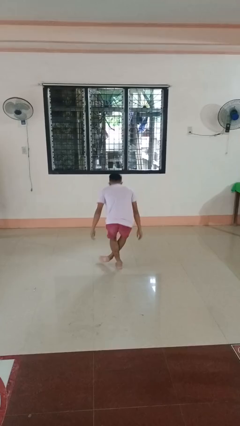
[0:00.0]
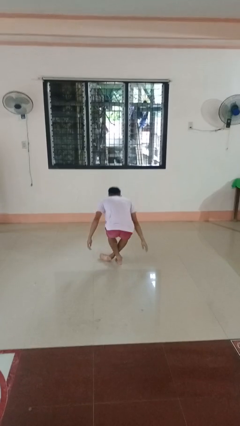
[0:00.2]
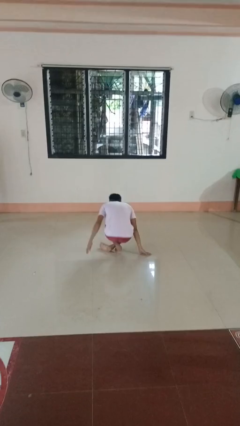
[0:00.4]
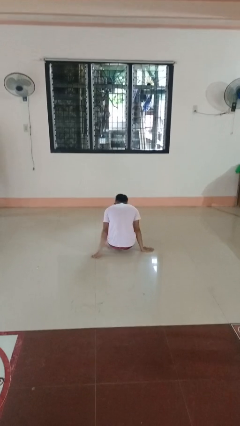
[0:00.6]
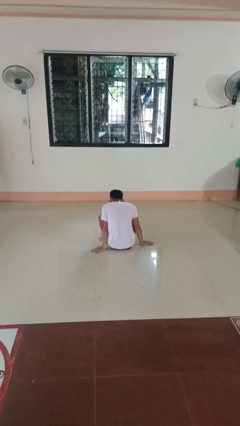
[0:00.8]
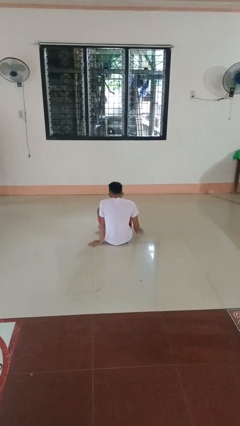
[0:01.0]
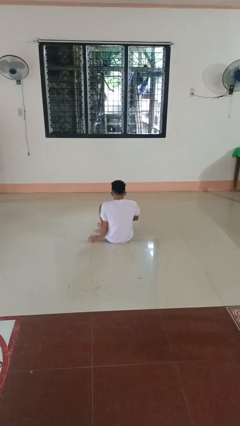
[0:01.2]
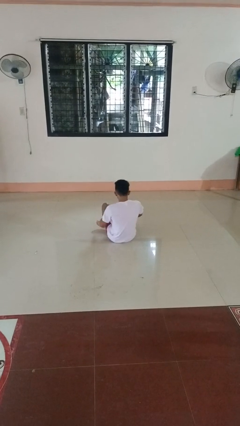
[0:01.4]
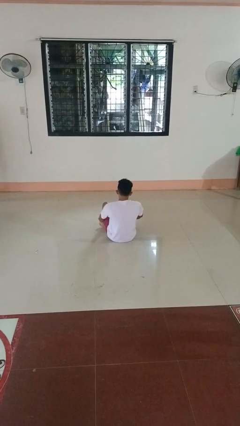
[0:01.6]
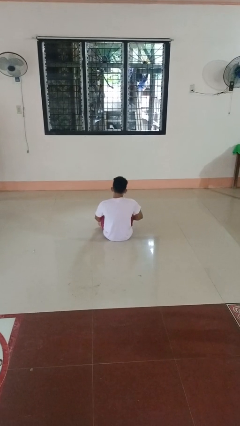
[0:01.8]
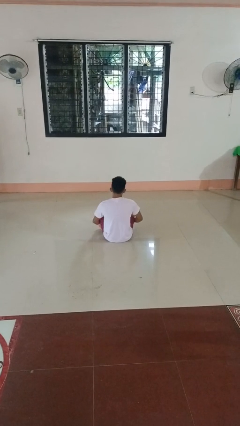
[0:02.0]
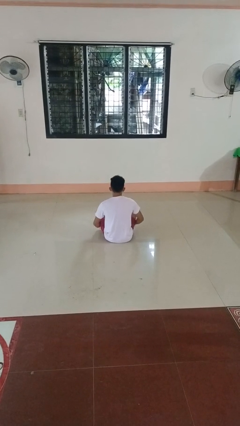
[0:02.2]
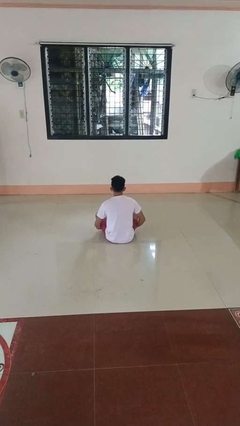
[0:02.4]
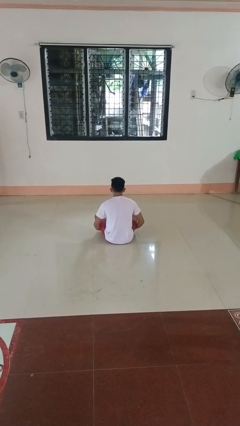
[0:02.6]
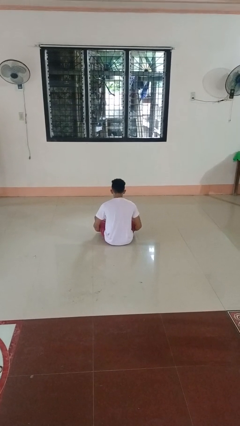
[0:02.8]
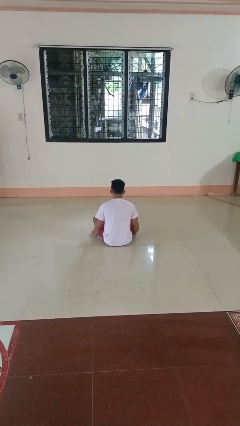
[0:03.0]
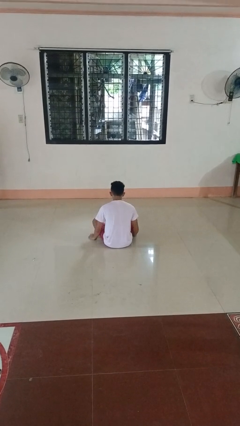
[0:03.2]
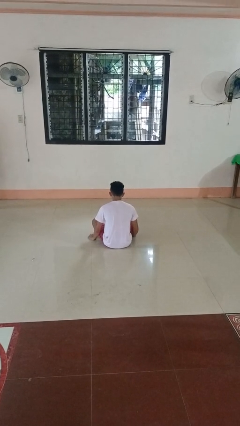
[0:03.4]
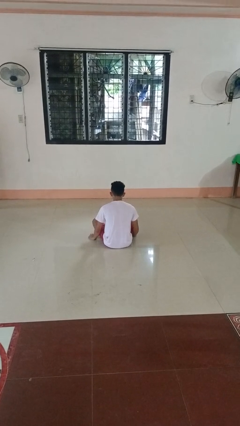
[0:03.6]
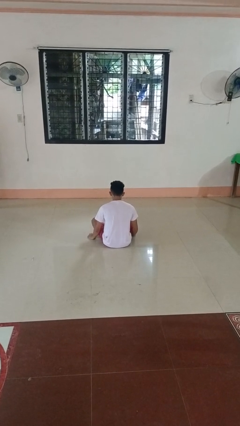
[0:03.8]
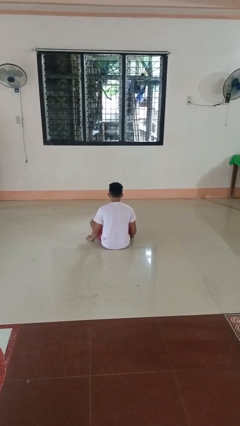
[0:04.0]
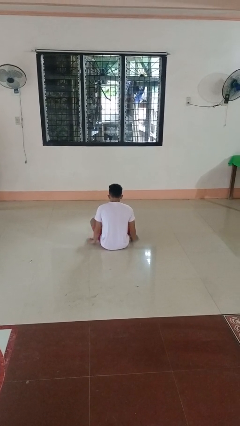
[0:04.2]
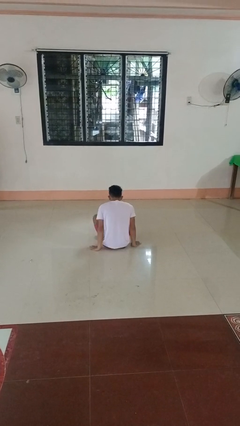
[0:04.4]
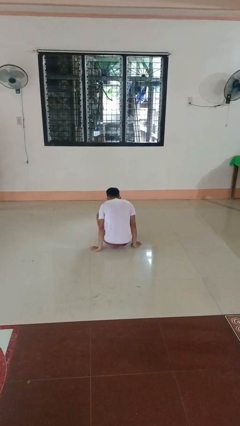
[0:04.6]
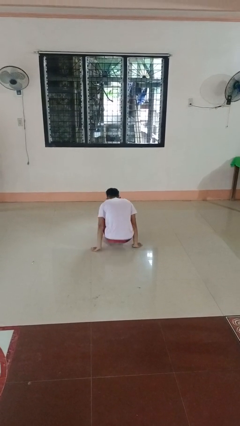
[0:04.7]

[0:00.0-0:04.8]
person sits crisscross

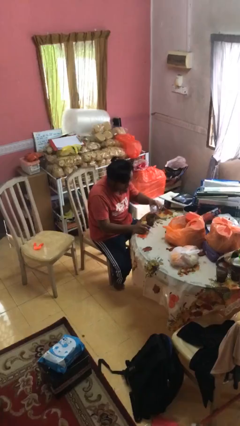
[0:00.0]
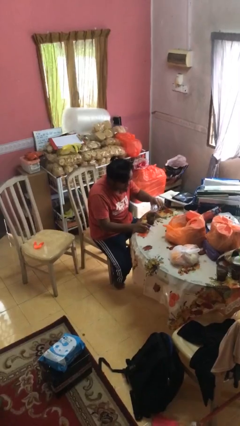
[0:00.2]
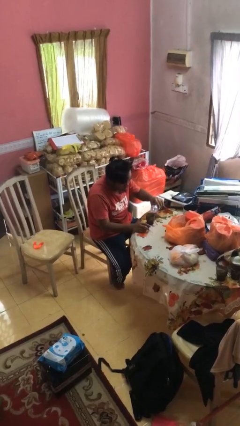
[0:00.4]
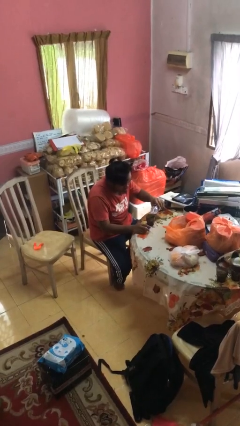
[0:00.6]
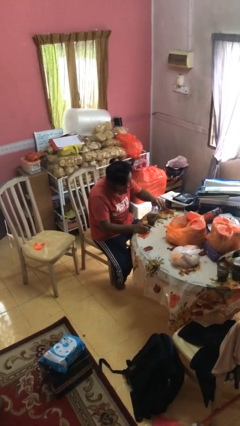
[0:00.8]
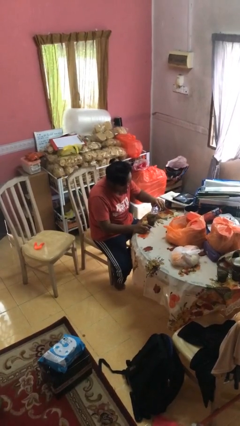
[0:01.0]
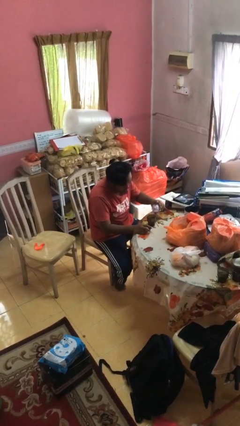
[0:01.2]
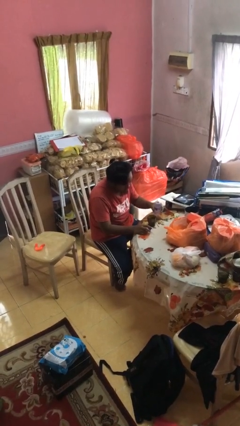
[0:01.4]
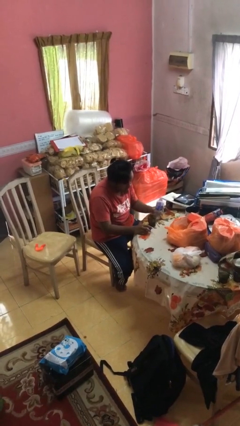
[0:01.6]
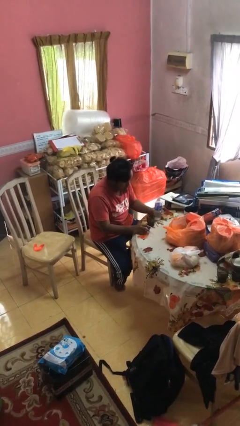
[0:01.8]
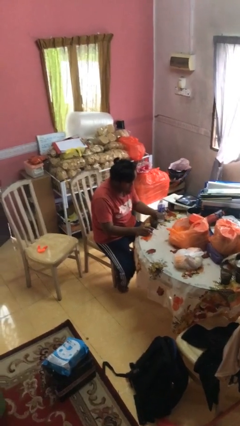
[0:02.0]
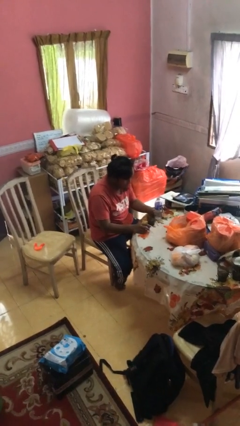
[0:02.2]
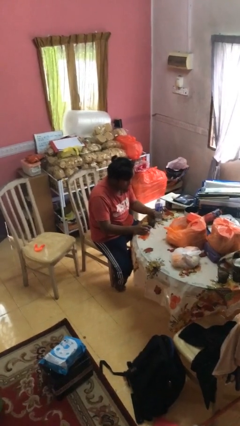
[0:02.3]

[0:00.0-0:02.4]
person pours liquid into cup

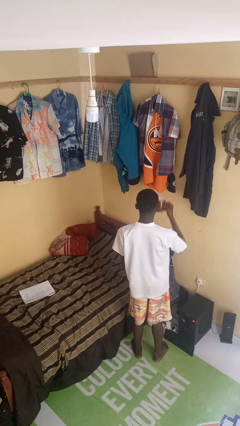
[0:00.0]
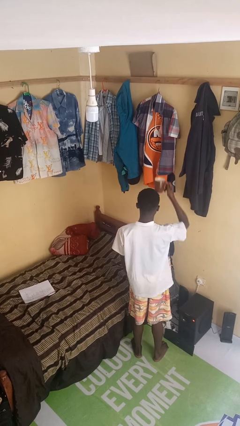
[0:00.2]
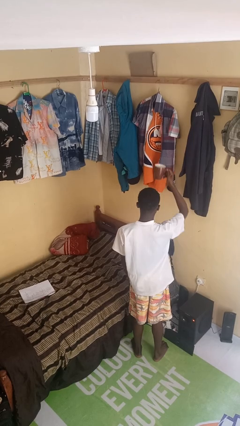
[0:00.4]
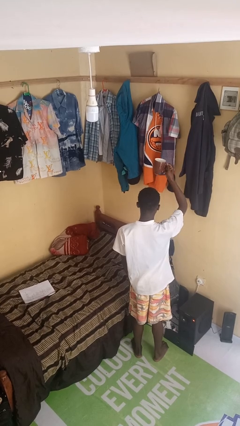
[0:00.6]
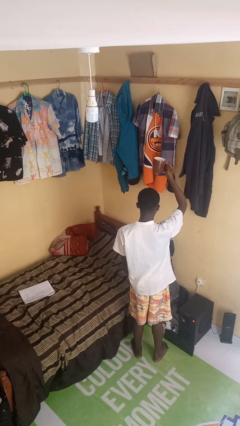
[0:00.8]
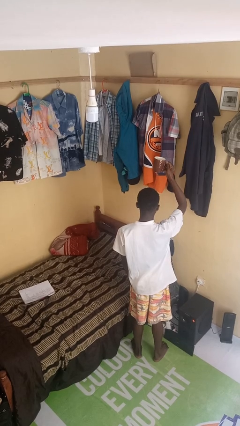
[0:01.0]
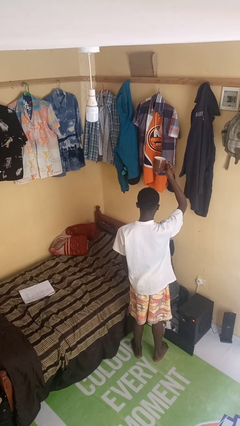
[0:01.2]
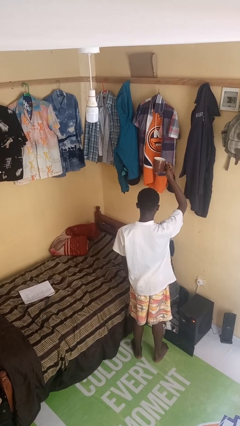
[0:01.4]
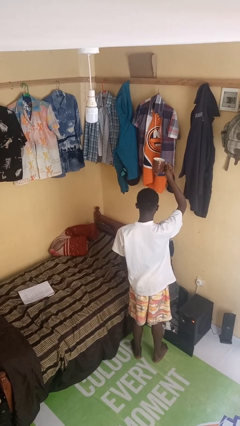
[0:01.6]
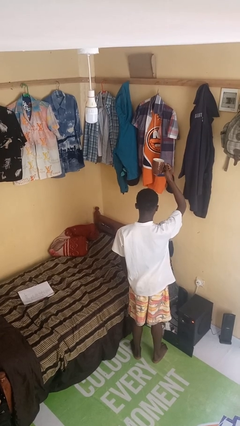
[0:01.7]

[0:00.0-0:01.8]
person holds object above head

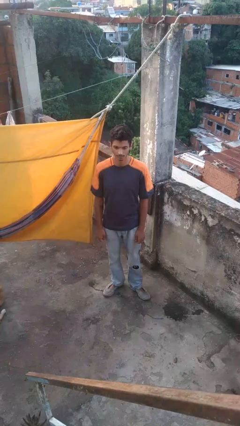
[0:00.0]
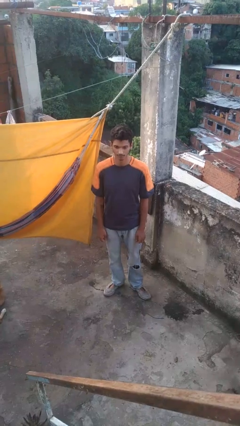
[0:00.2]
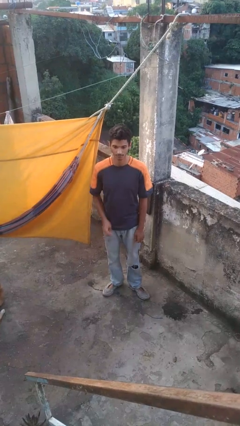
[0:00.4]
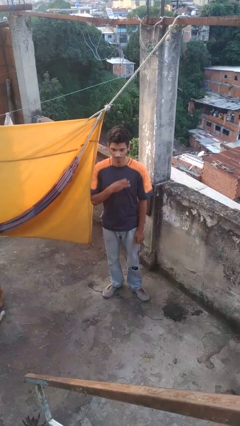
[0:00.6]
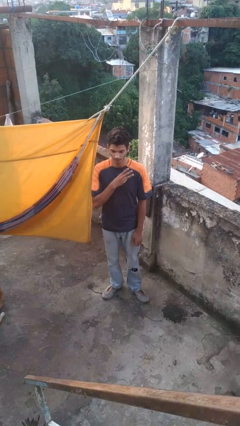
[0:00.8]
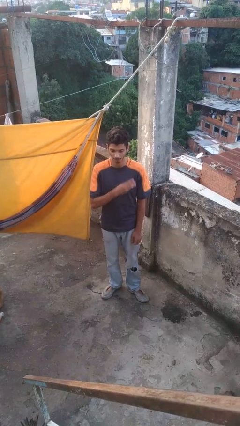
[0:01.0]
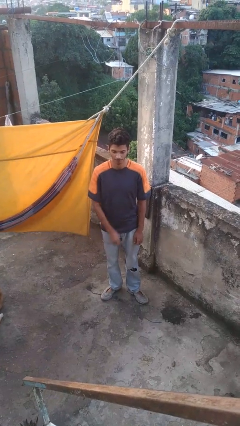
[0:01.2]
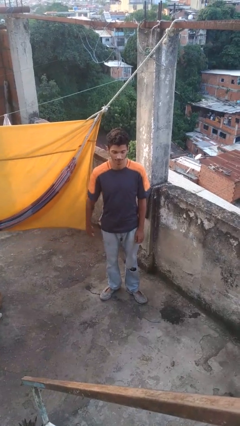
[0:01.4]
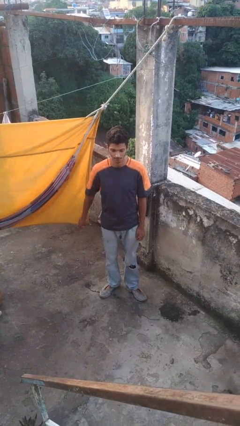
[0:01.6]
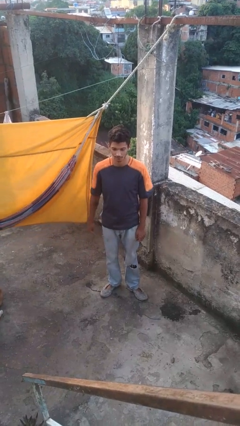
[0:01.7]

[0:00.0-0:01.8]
person gestures number three

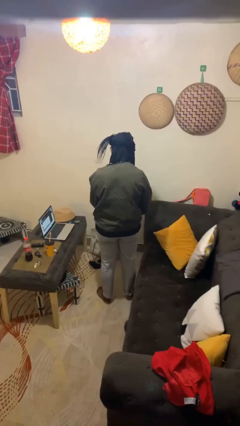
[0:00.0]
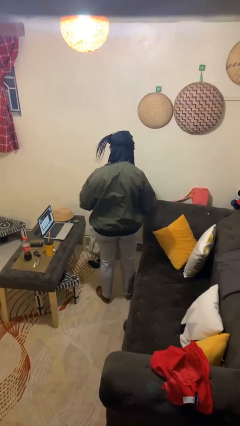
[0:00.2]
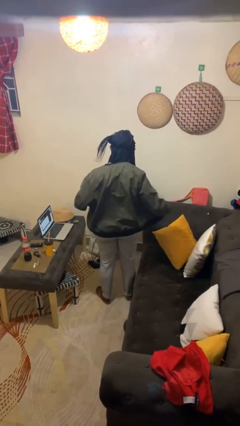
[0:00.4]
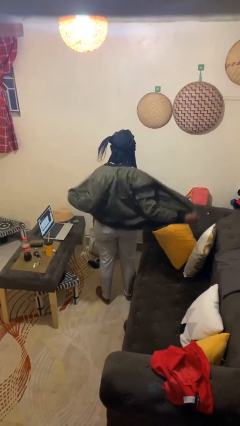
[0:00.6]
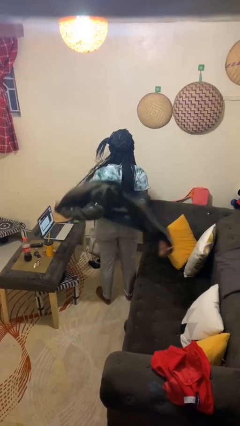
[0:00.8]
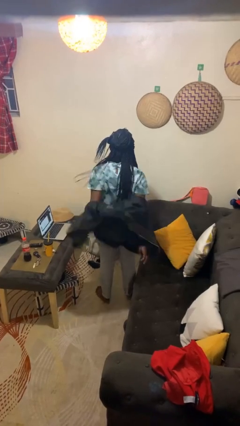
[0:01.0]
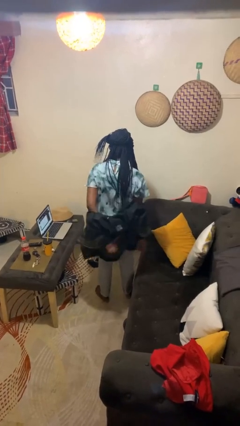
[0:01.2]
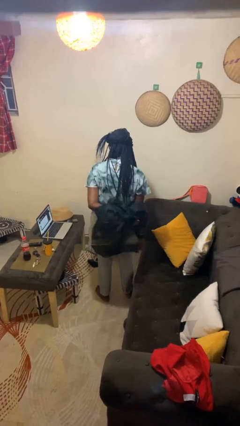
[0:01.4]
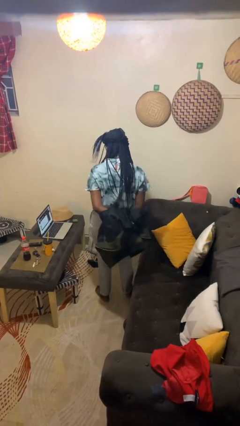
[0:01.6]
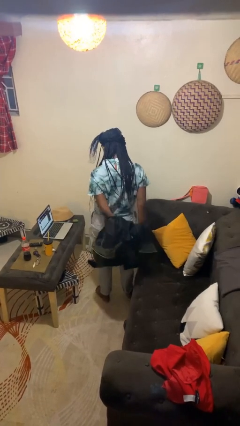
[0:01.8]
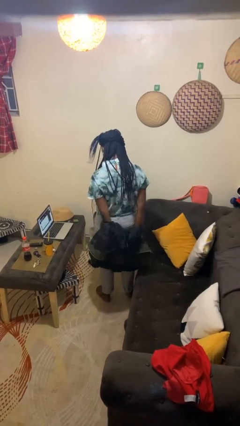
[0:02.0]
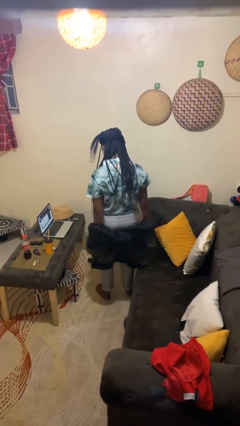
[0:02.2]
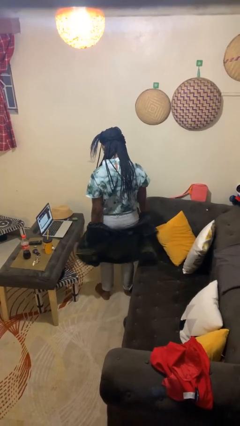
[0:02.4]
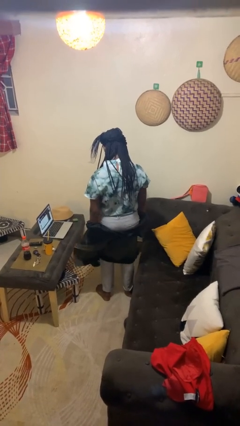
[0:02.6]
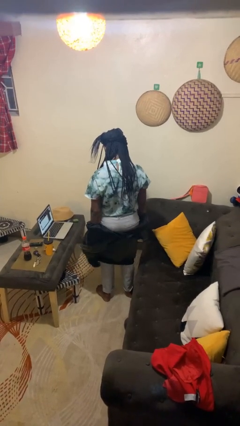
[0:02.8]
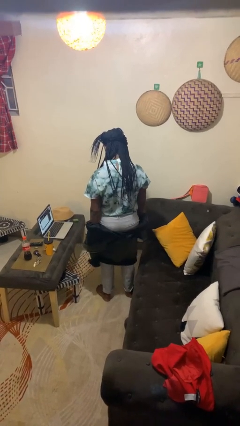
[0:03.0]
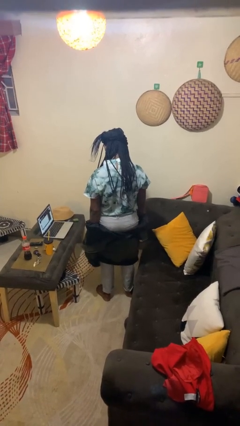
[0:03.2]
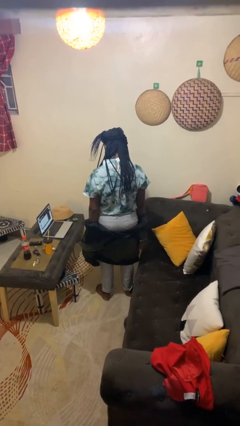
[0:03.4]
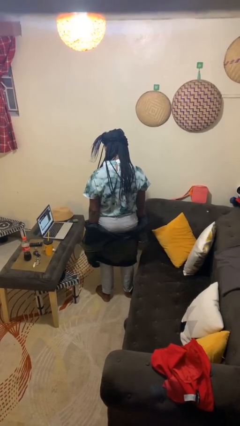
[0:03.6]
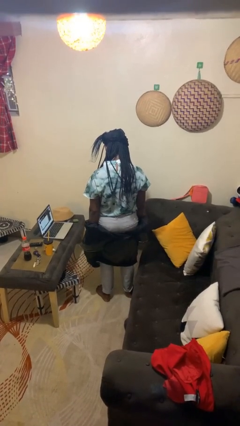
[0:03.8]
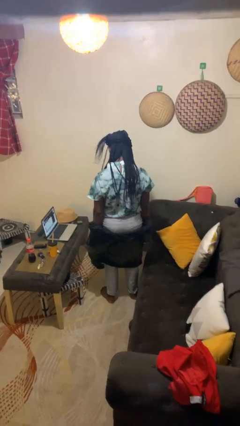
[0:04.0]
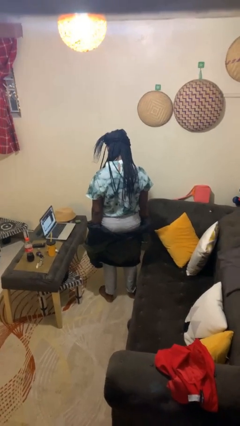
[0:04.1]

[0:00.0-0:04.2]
person takes off jacket

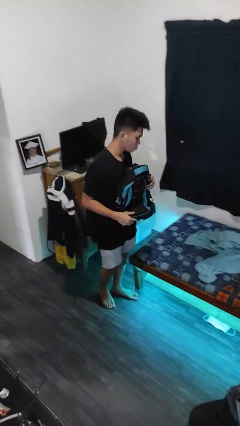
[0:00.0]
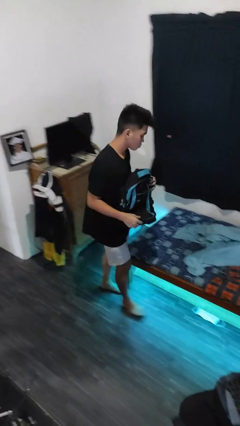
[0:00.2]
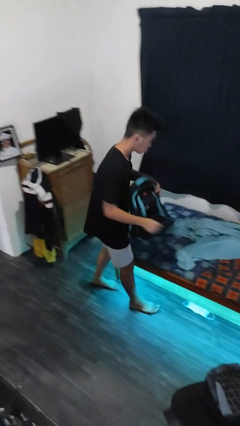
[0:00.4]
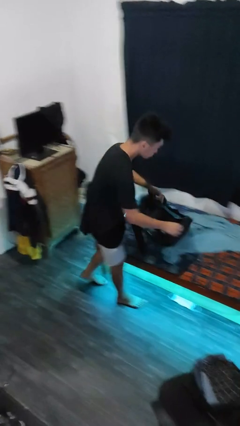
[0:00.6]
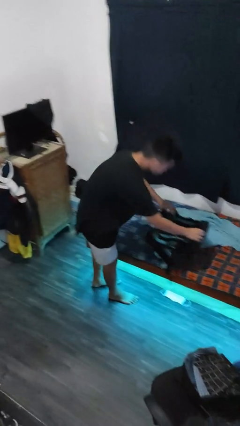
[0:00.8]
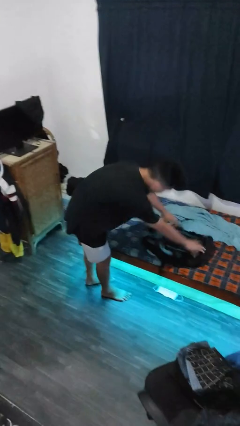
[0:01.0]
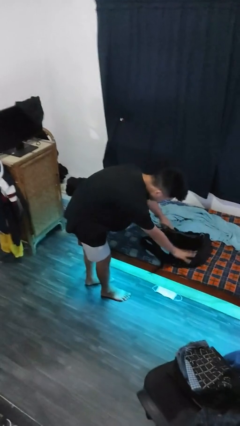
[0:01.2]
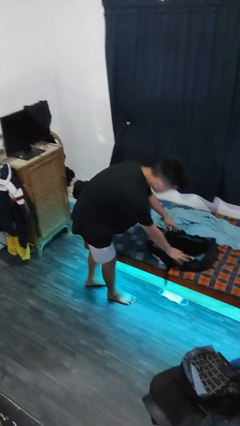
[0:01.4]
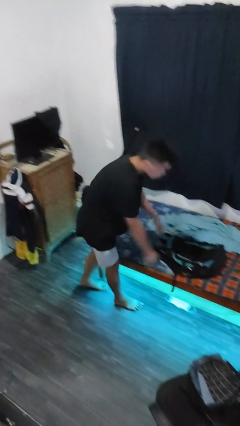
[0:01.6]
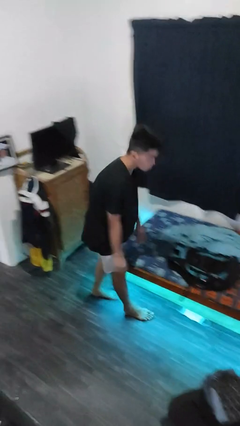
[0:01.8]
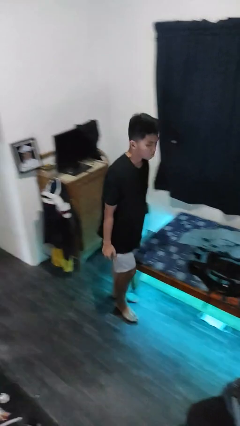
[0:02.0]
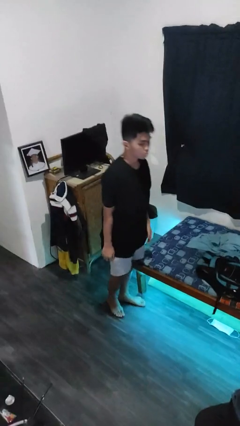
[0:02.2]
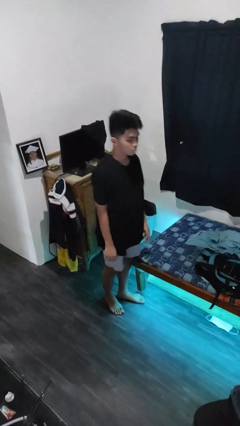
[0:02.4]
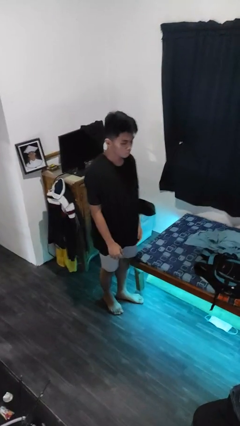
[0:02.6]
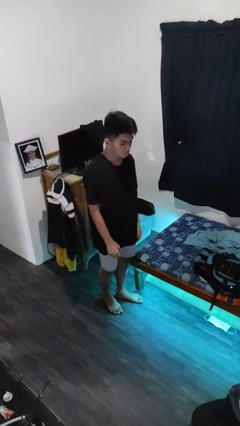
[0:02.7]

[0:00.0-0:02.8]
person puts down object on bed
